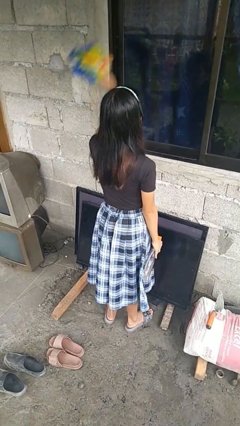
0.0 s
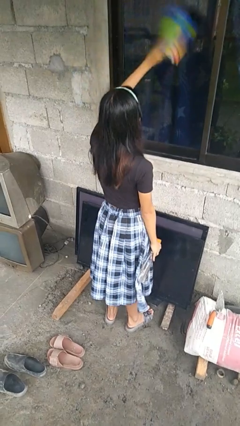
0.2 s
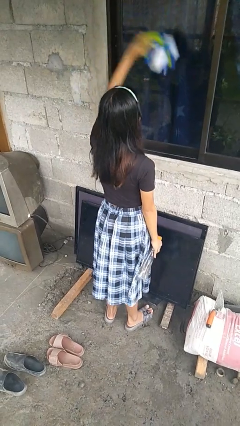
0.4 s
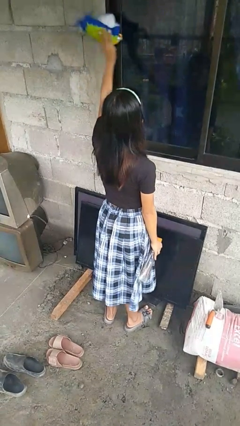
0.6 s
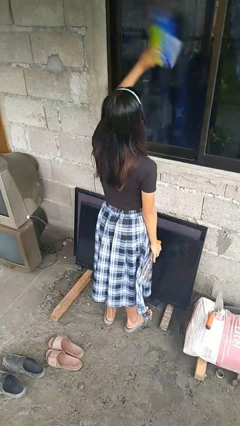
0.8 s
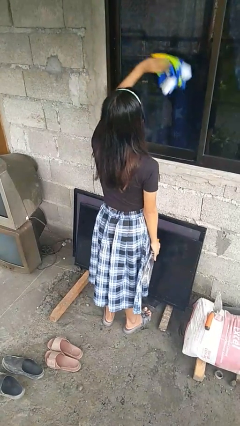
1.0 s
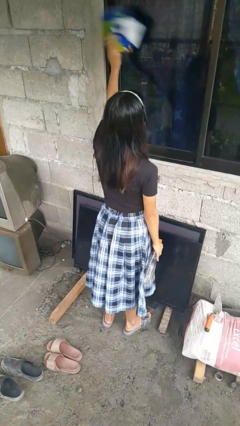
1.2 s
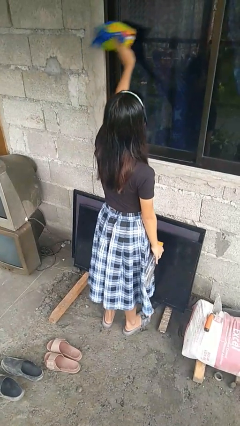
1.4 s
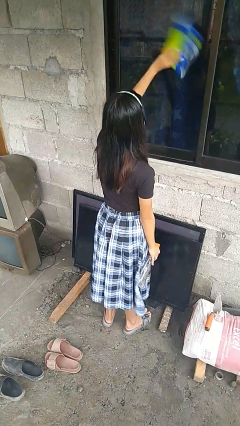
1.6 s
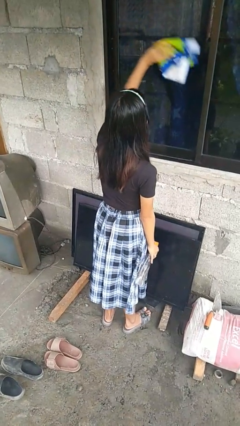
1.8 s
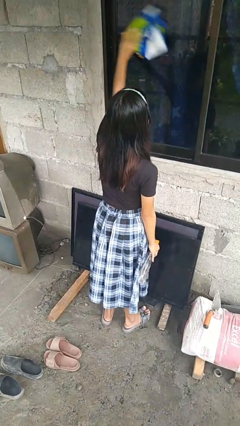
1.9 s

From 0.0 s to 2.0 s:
person washes window

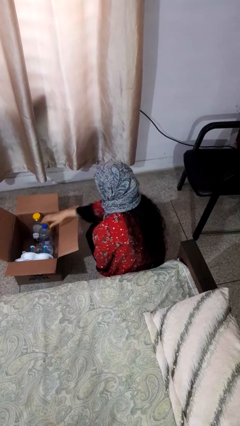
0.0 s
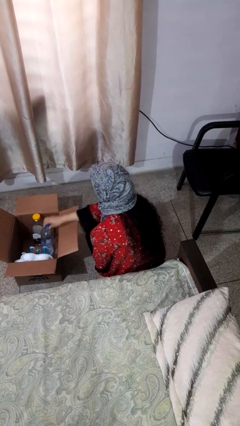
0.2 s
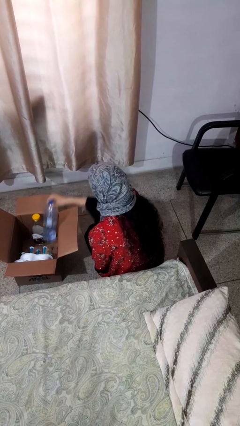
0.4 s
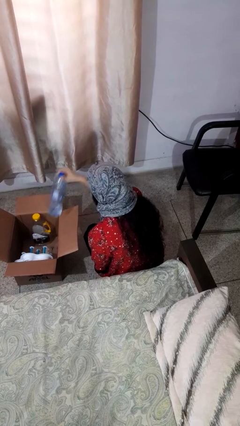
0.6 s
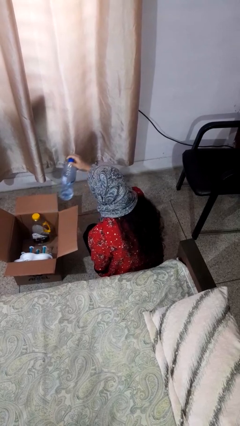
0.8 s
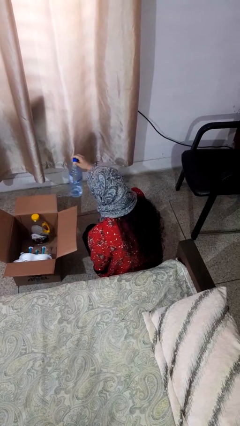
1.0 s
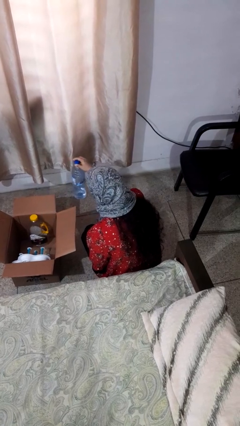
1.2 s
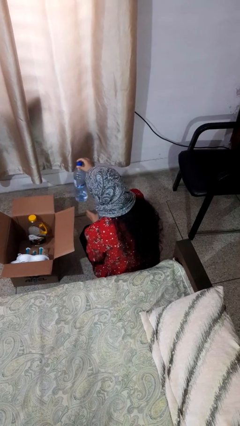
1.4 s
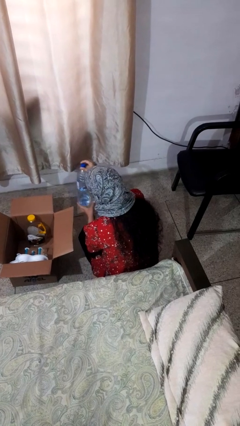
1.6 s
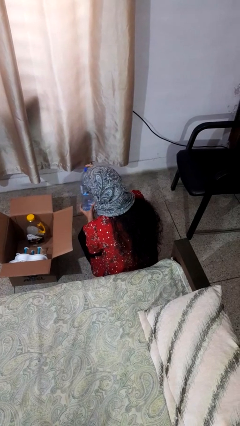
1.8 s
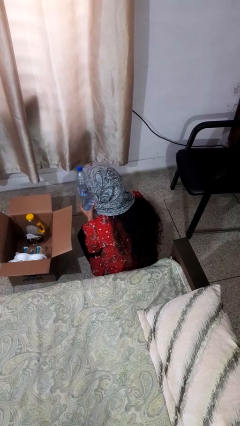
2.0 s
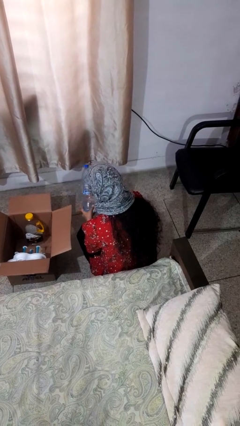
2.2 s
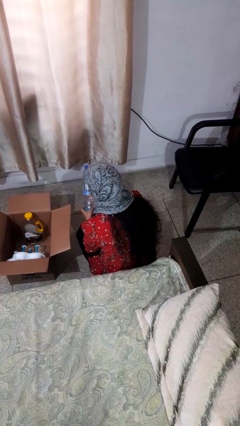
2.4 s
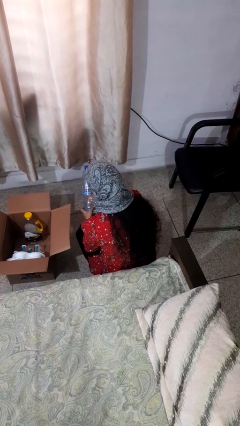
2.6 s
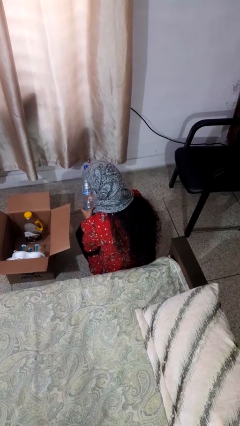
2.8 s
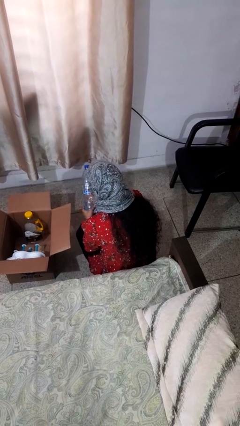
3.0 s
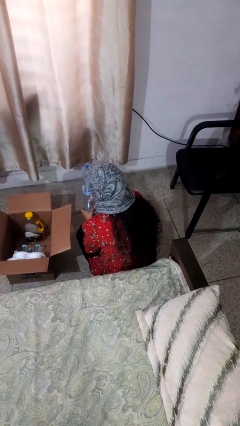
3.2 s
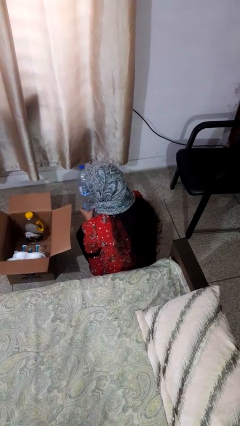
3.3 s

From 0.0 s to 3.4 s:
person takes object from box

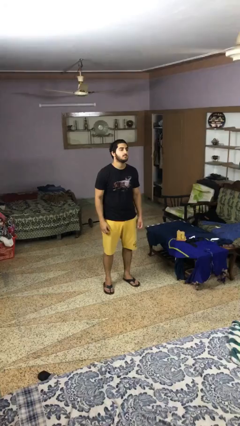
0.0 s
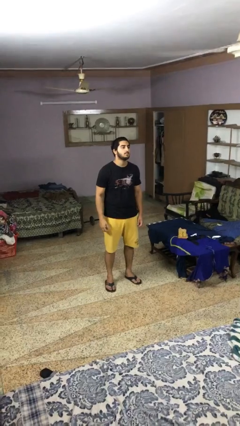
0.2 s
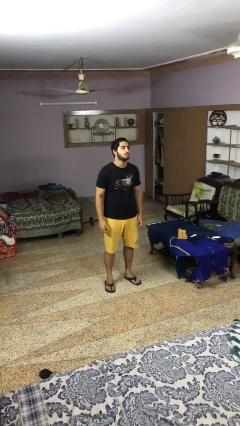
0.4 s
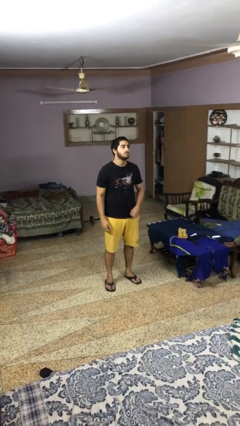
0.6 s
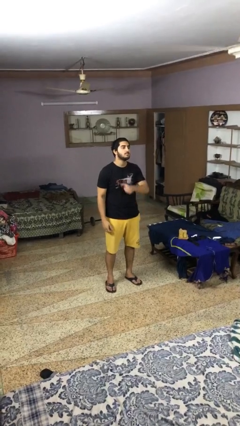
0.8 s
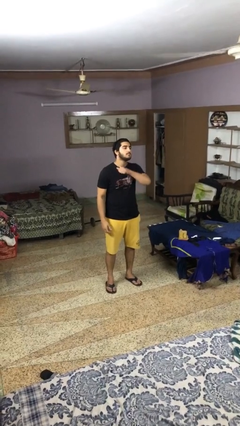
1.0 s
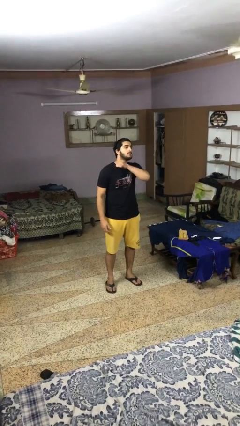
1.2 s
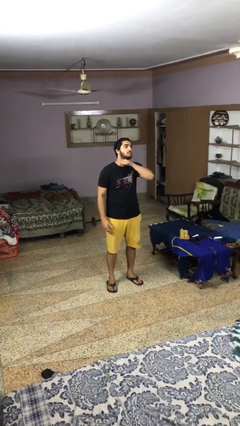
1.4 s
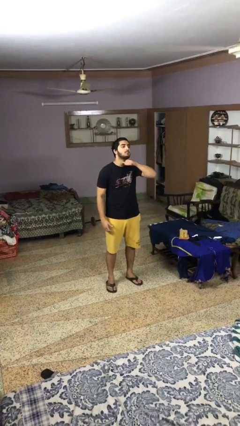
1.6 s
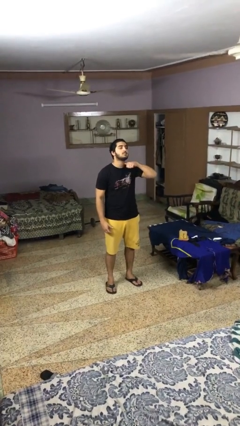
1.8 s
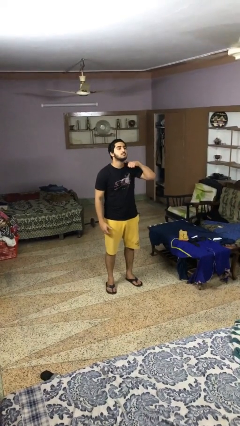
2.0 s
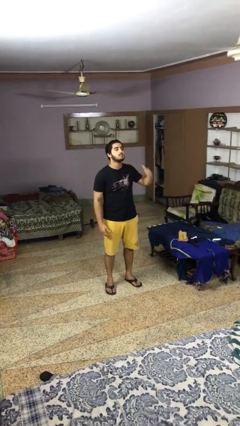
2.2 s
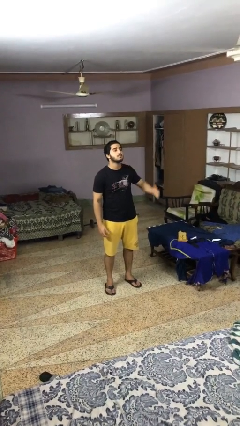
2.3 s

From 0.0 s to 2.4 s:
person gestures cut

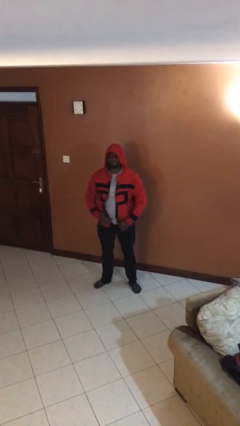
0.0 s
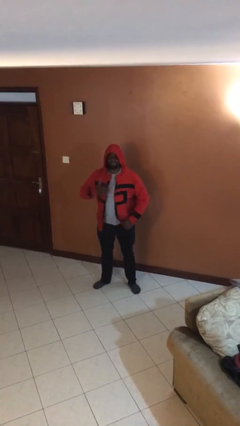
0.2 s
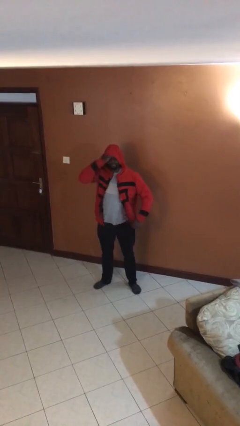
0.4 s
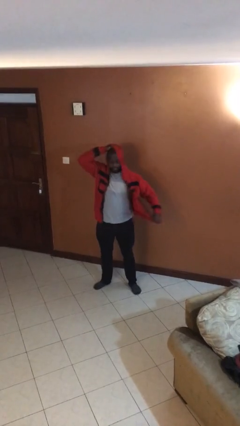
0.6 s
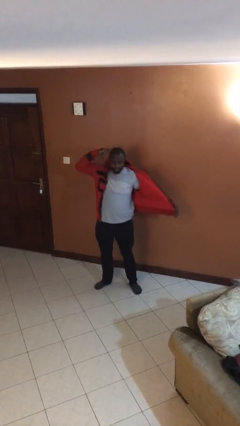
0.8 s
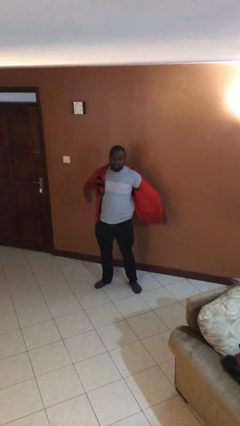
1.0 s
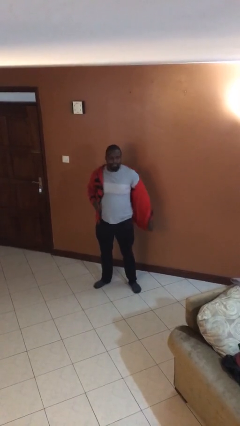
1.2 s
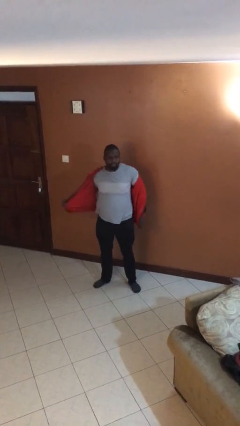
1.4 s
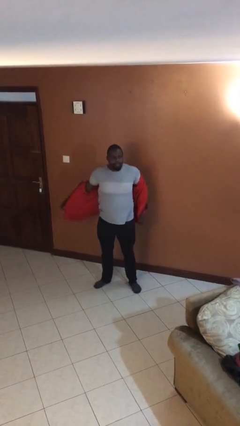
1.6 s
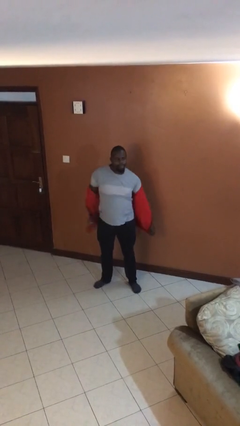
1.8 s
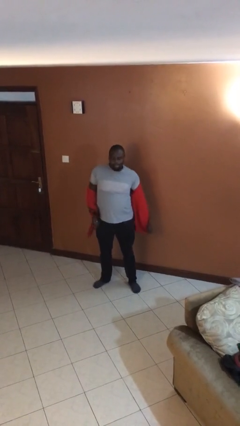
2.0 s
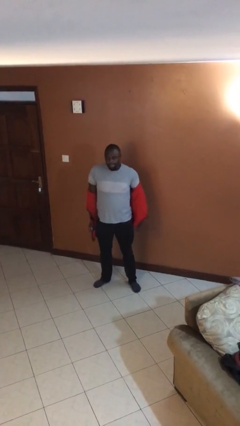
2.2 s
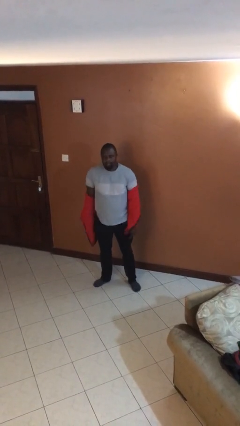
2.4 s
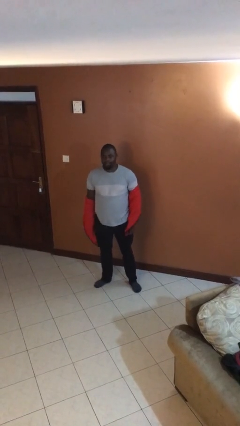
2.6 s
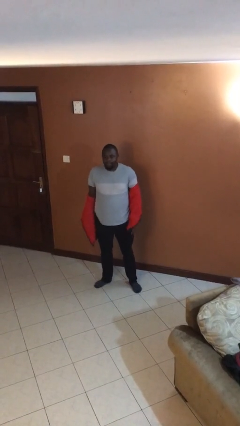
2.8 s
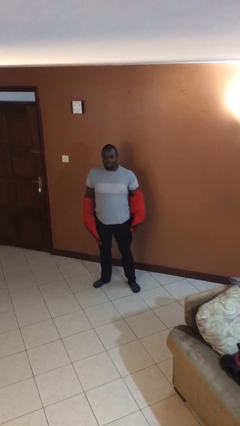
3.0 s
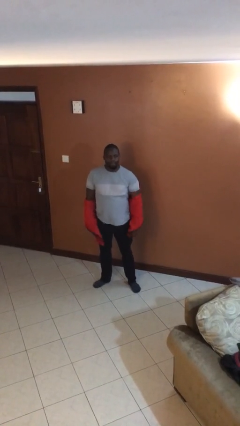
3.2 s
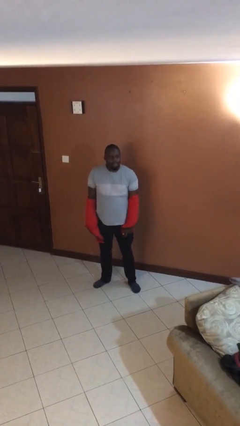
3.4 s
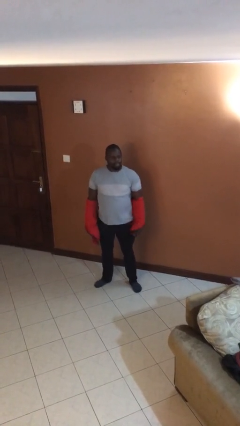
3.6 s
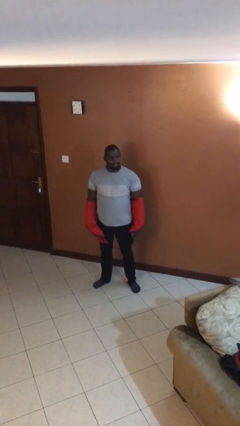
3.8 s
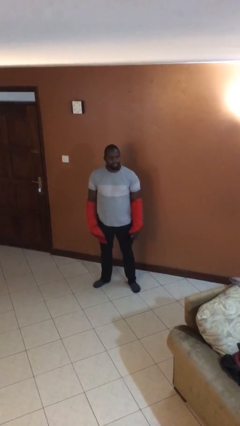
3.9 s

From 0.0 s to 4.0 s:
person takes off jacket

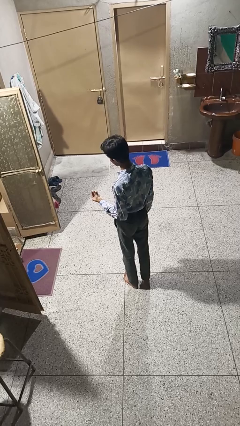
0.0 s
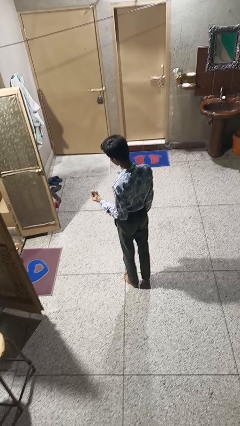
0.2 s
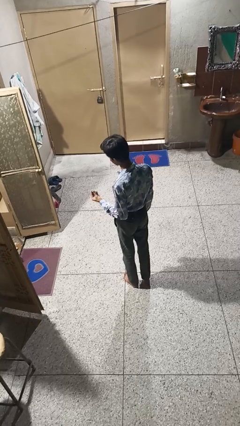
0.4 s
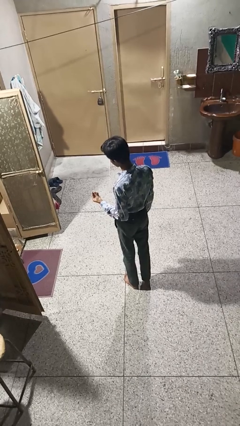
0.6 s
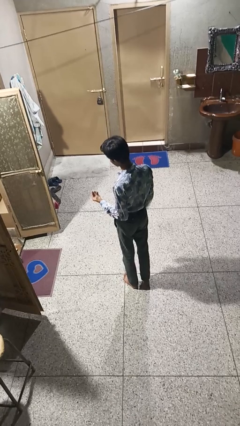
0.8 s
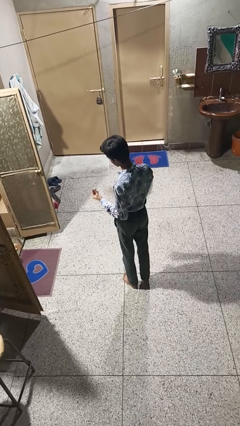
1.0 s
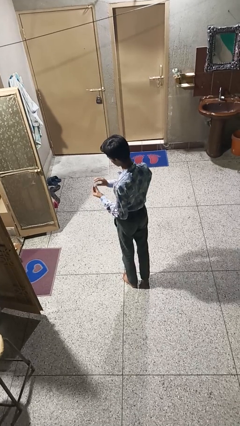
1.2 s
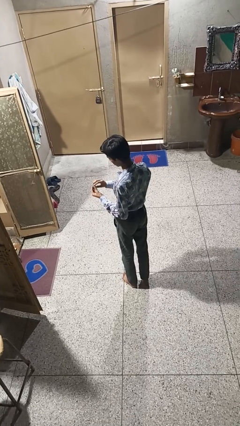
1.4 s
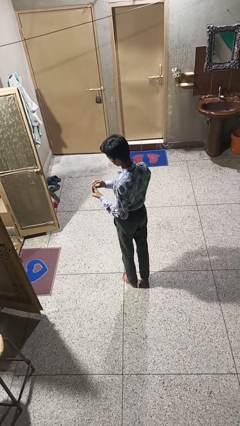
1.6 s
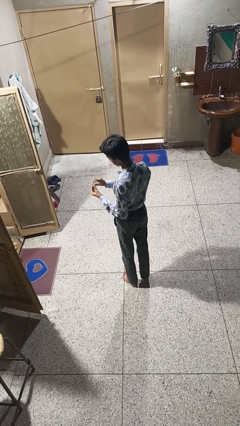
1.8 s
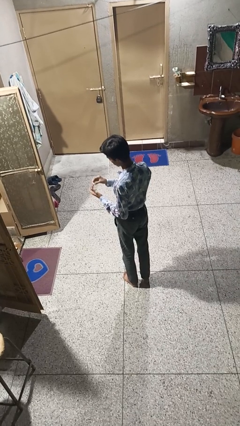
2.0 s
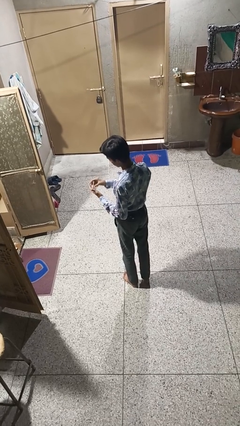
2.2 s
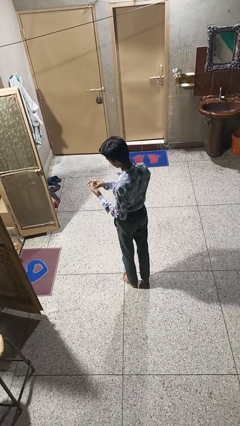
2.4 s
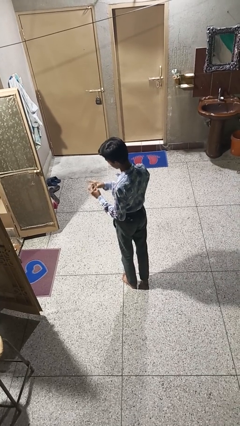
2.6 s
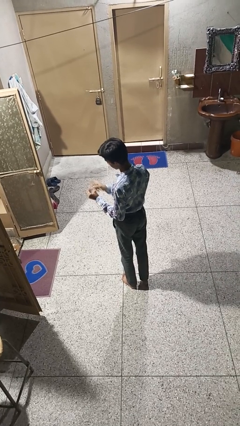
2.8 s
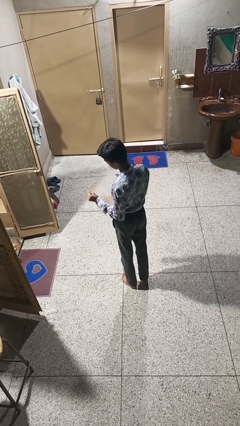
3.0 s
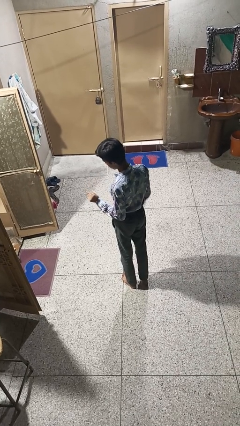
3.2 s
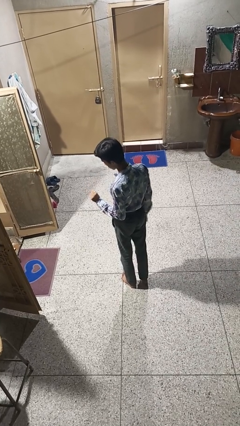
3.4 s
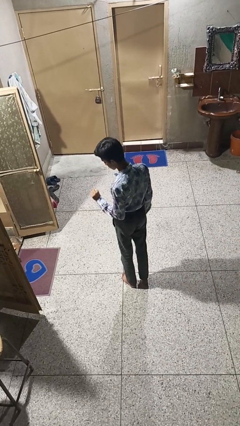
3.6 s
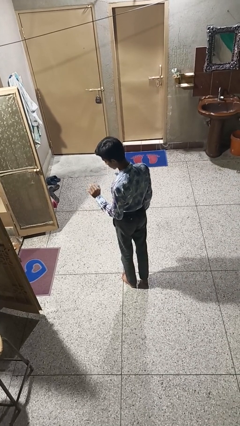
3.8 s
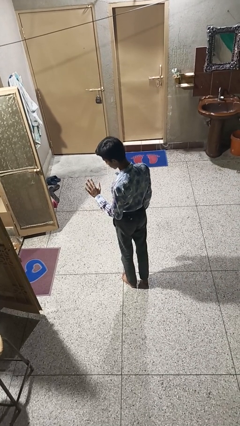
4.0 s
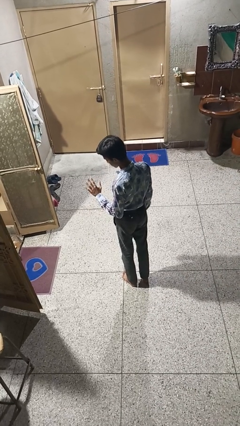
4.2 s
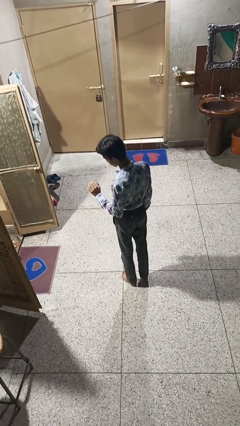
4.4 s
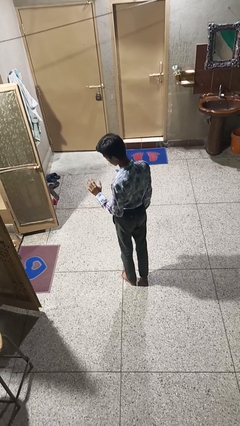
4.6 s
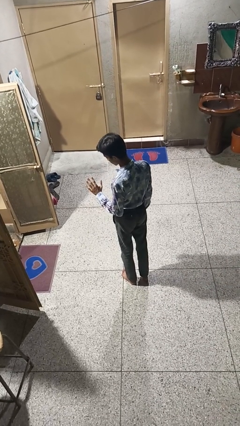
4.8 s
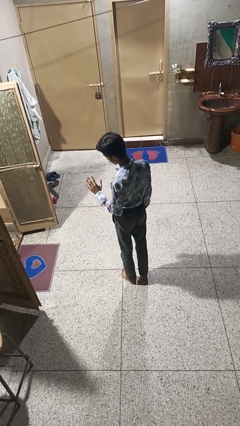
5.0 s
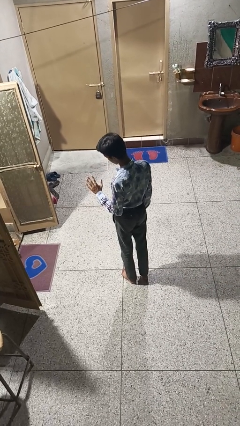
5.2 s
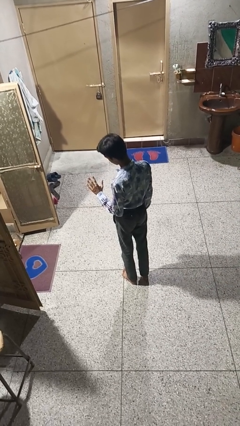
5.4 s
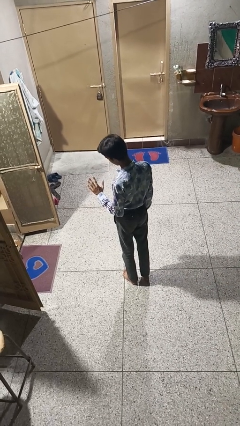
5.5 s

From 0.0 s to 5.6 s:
person puts on ring
